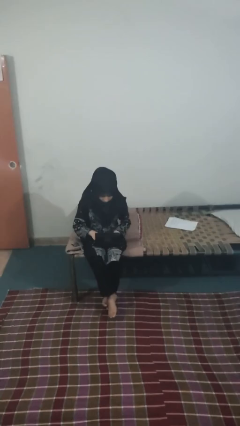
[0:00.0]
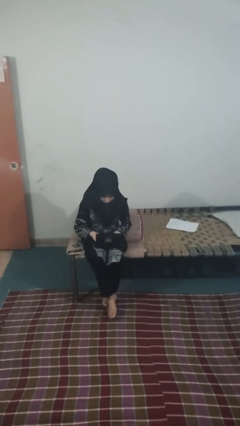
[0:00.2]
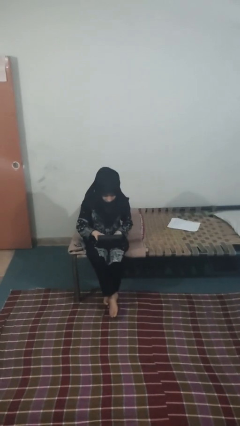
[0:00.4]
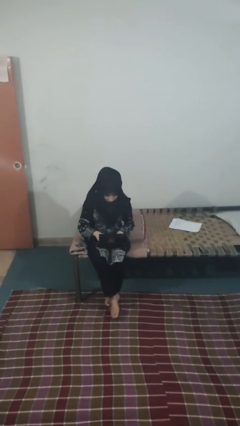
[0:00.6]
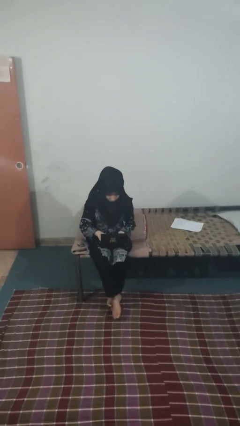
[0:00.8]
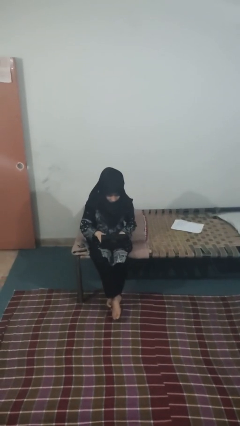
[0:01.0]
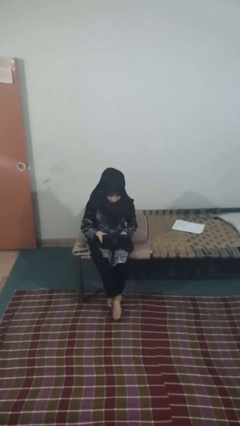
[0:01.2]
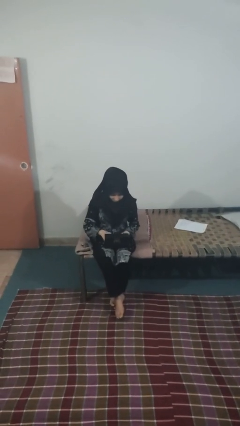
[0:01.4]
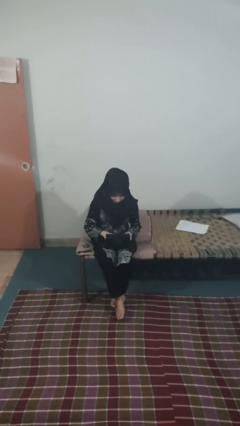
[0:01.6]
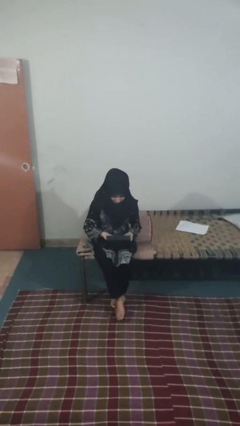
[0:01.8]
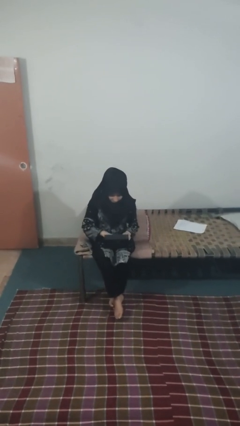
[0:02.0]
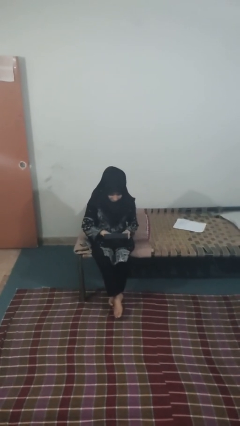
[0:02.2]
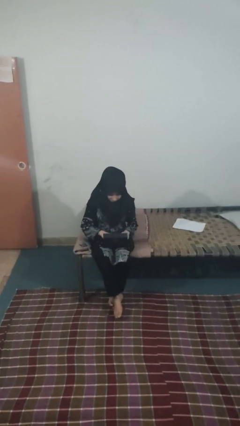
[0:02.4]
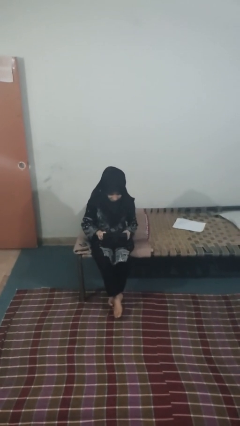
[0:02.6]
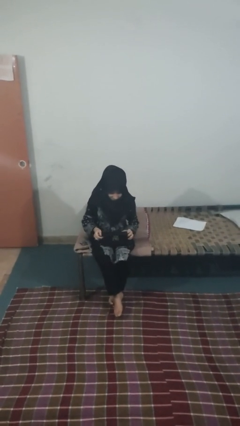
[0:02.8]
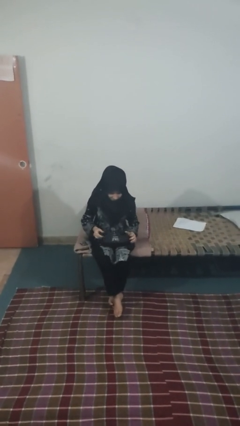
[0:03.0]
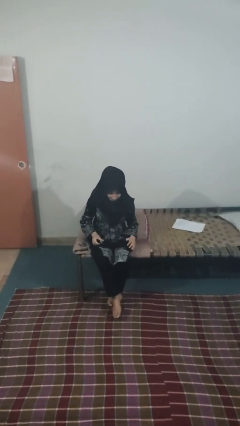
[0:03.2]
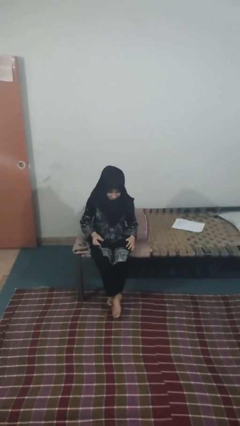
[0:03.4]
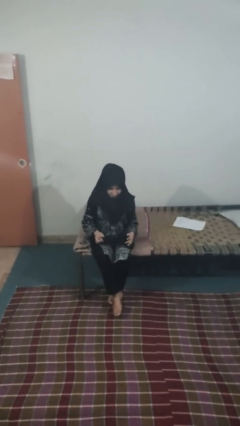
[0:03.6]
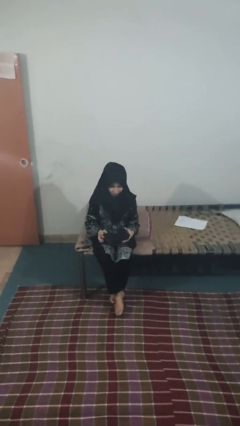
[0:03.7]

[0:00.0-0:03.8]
person searches jewelry box

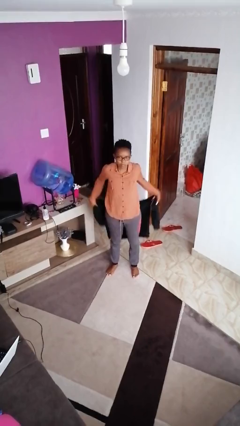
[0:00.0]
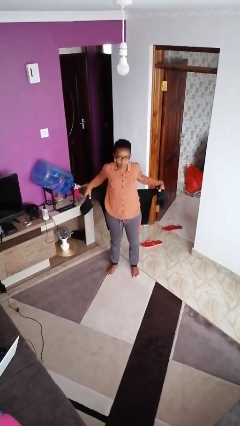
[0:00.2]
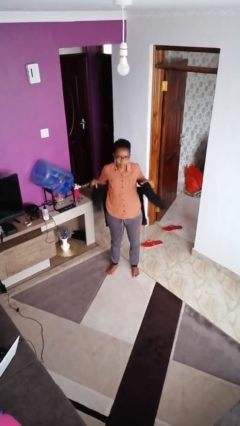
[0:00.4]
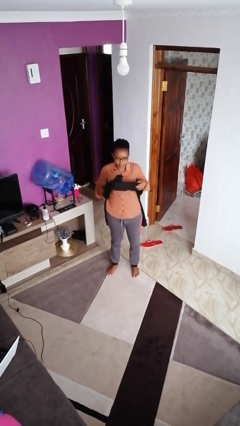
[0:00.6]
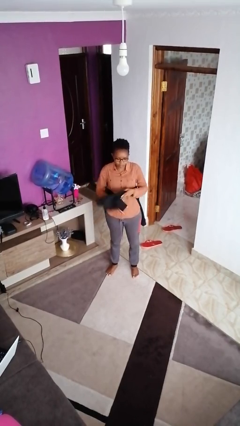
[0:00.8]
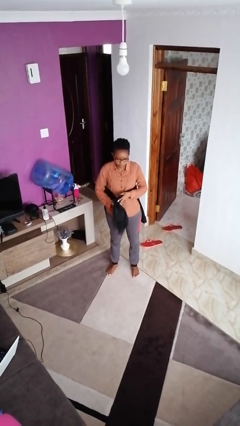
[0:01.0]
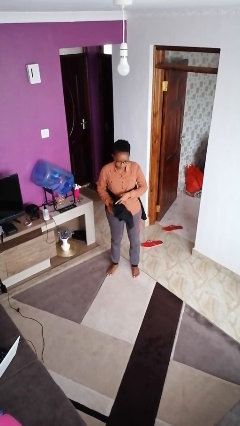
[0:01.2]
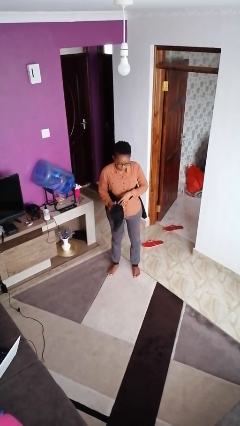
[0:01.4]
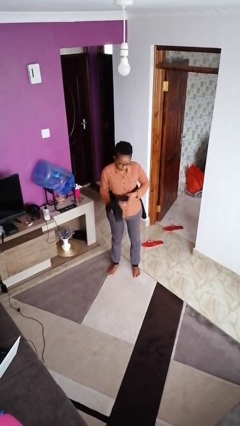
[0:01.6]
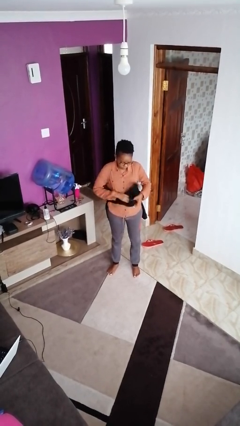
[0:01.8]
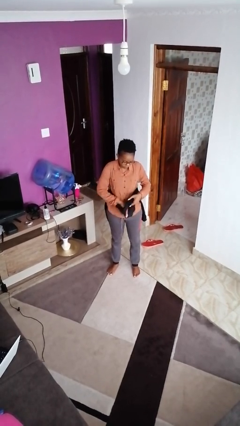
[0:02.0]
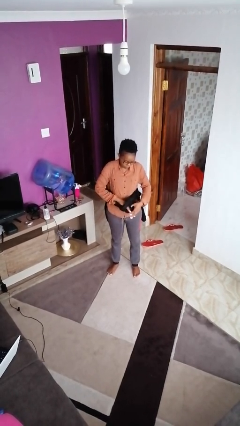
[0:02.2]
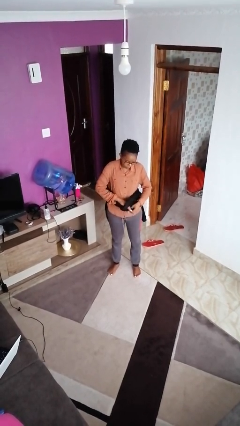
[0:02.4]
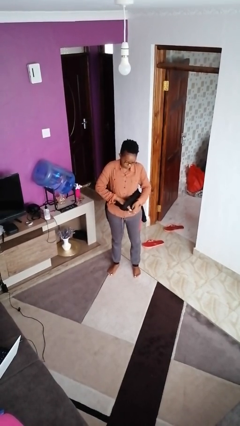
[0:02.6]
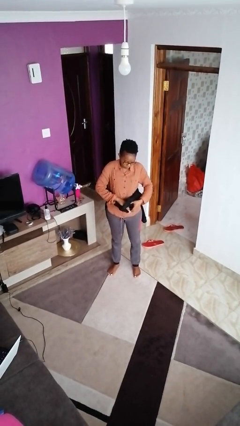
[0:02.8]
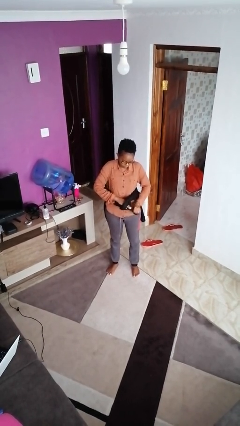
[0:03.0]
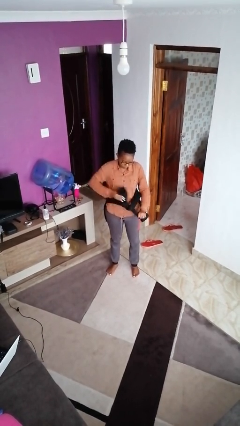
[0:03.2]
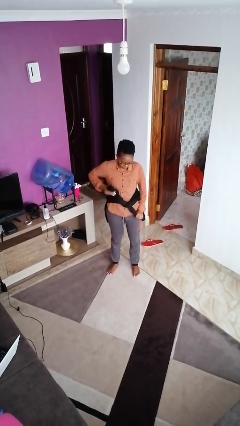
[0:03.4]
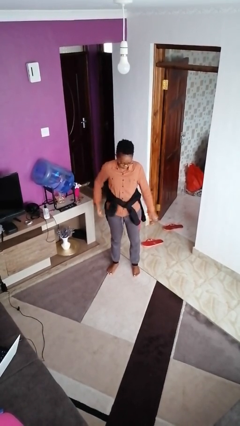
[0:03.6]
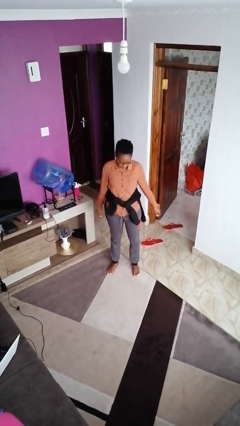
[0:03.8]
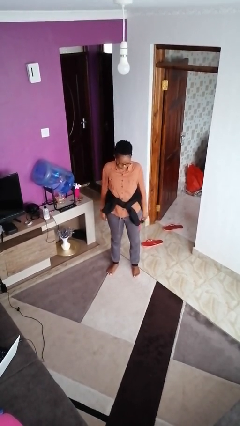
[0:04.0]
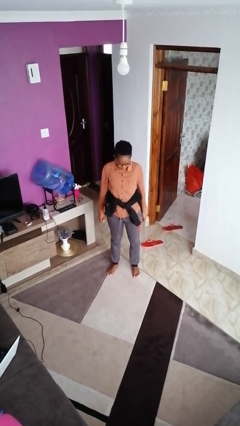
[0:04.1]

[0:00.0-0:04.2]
person ties jacket around waist

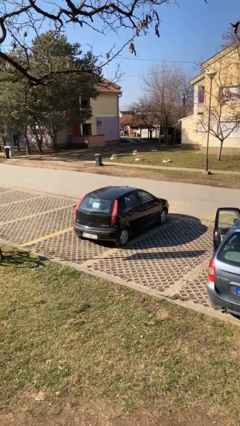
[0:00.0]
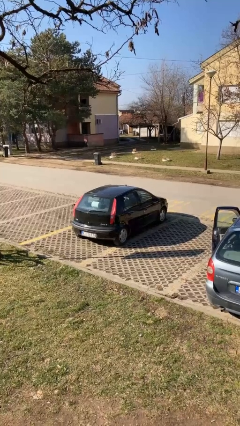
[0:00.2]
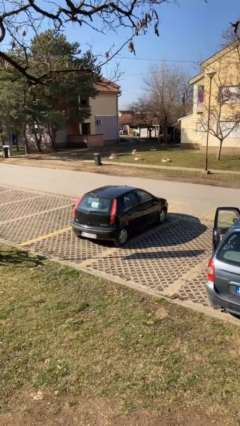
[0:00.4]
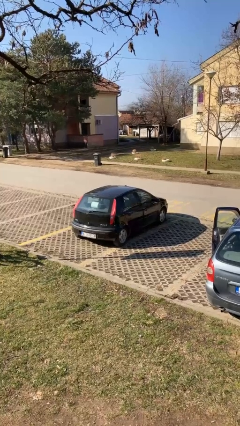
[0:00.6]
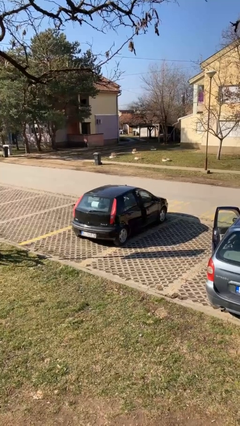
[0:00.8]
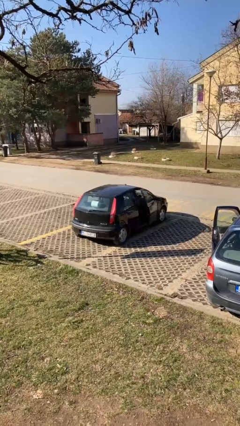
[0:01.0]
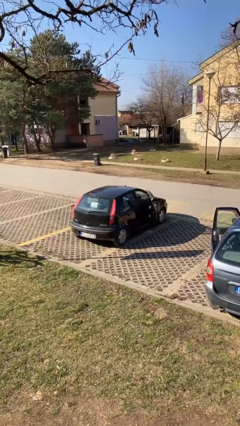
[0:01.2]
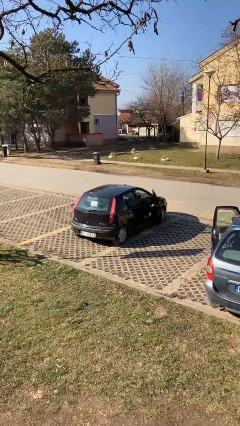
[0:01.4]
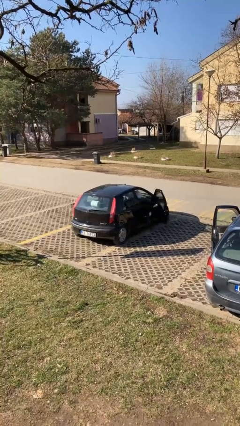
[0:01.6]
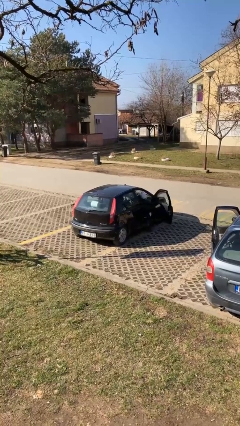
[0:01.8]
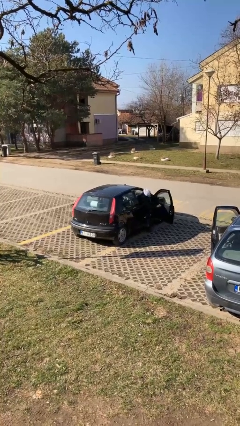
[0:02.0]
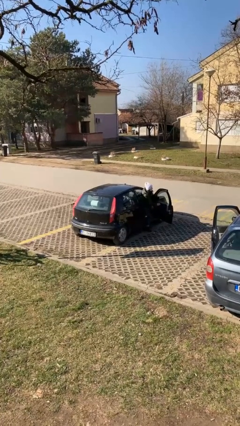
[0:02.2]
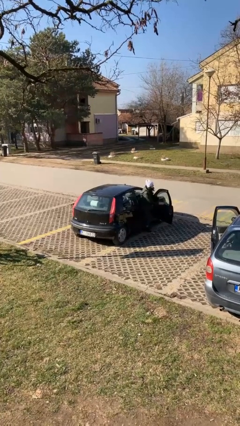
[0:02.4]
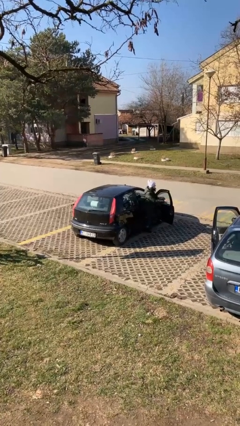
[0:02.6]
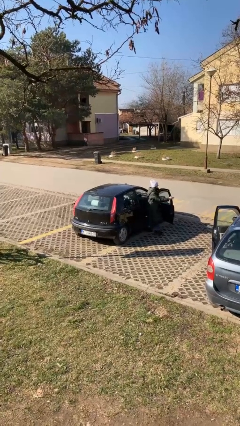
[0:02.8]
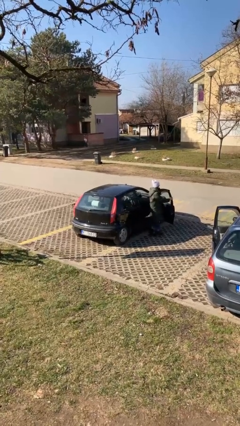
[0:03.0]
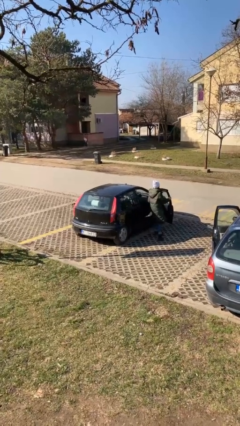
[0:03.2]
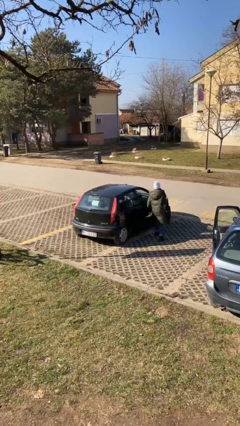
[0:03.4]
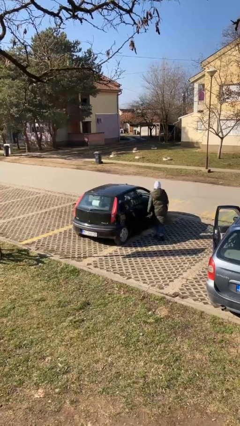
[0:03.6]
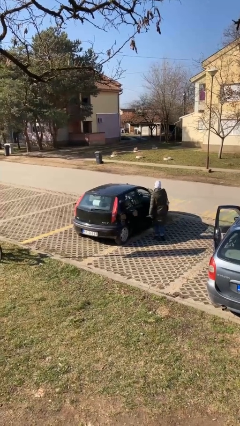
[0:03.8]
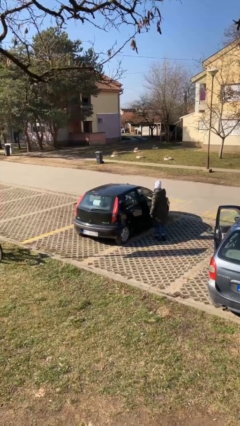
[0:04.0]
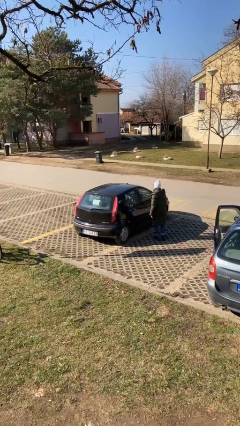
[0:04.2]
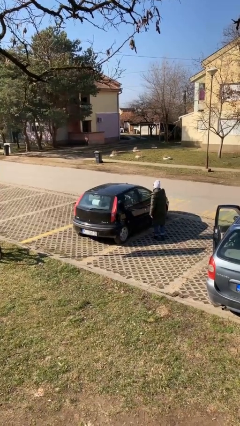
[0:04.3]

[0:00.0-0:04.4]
car drops off person

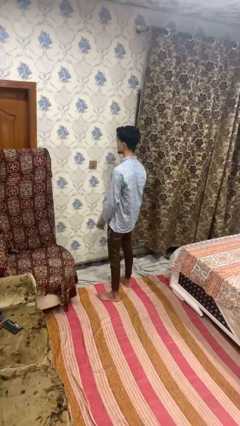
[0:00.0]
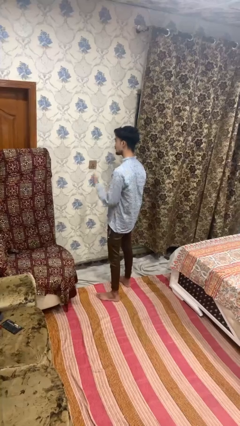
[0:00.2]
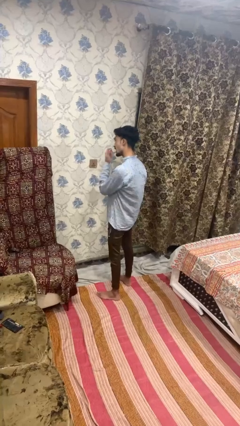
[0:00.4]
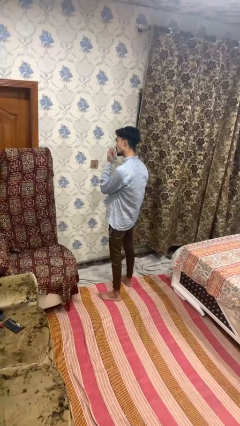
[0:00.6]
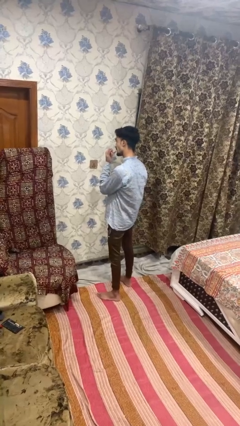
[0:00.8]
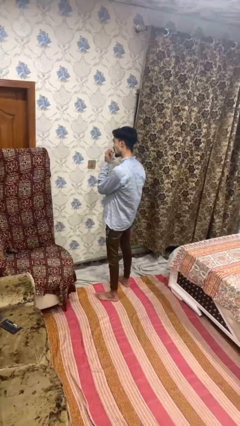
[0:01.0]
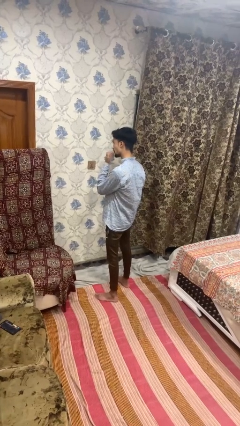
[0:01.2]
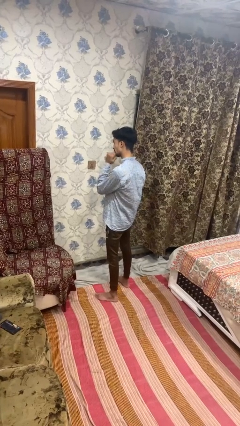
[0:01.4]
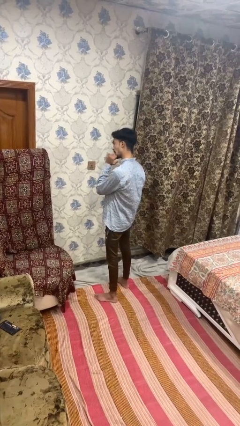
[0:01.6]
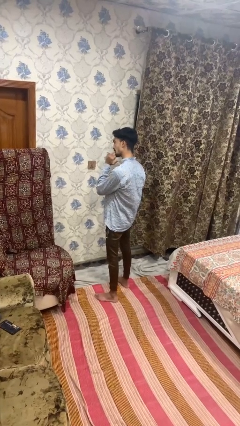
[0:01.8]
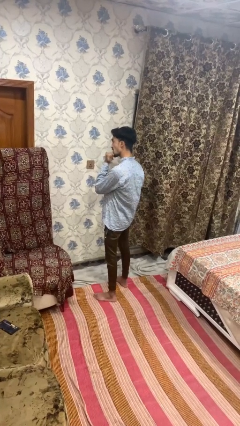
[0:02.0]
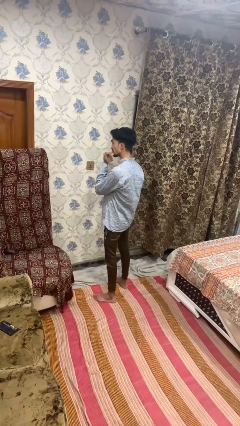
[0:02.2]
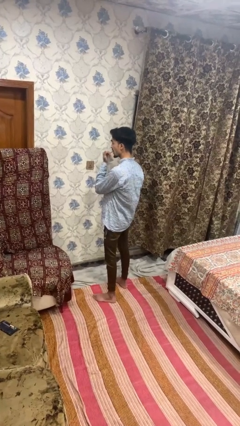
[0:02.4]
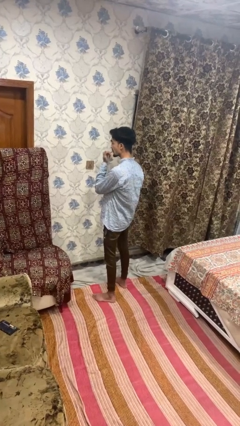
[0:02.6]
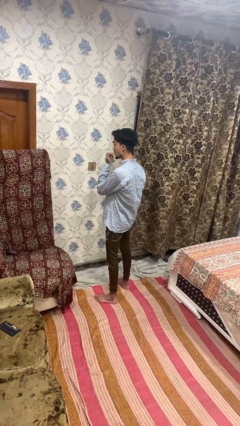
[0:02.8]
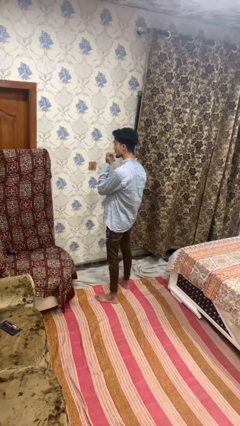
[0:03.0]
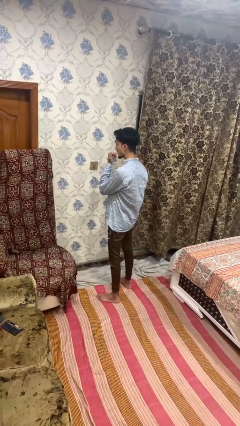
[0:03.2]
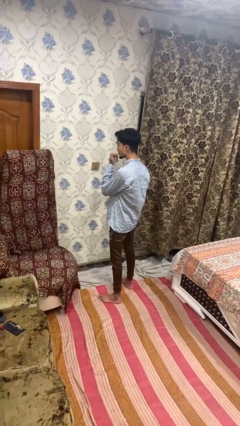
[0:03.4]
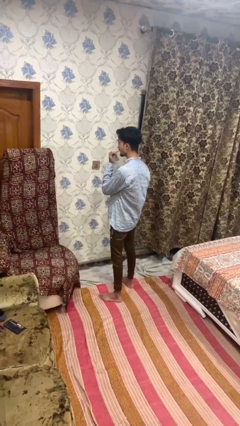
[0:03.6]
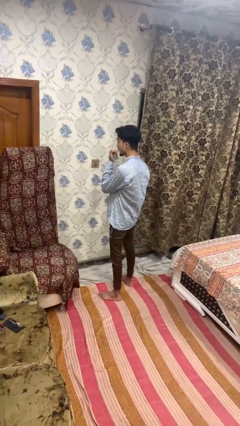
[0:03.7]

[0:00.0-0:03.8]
person licks fingers

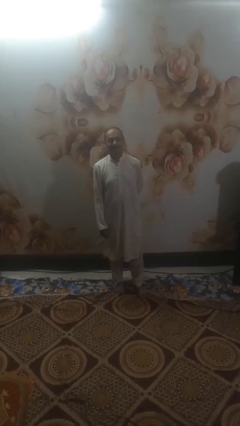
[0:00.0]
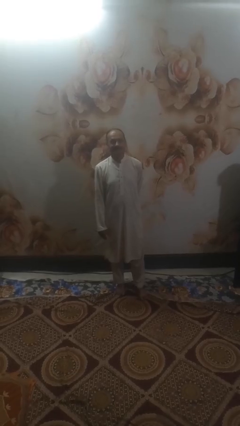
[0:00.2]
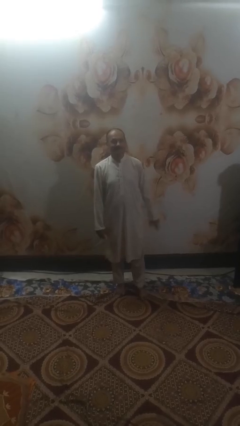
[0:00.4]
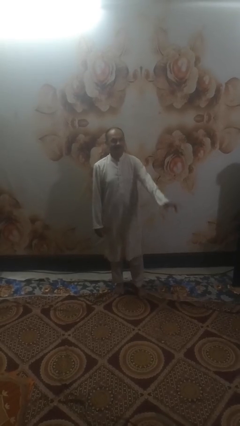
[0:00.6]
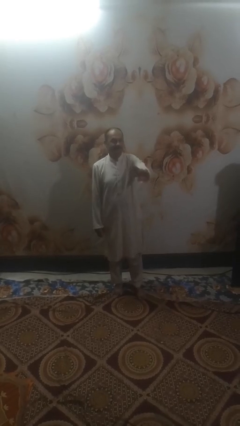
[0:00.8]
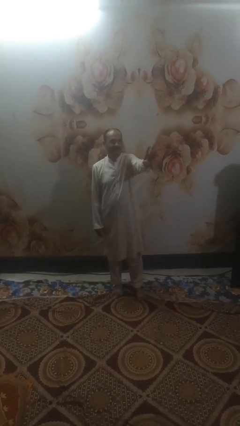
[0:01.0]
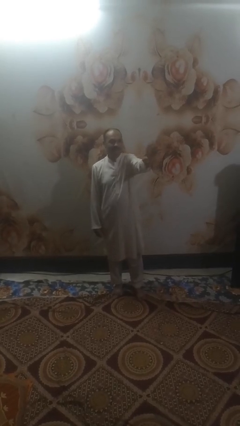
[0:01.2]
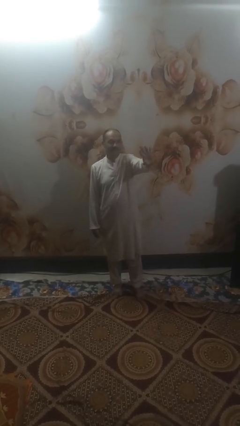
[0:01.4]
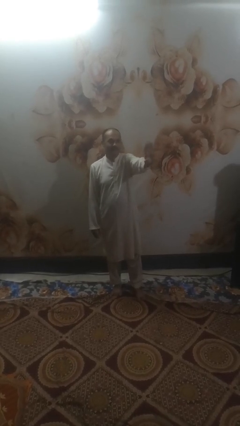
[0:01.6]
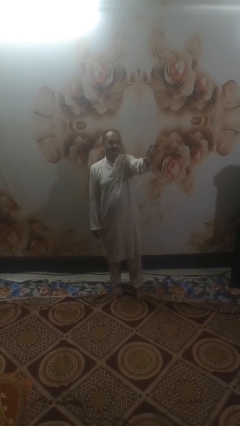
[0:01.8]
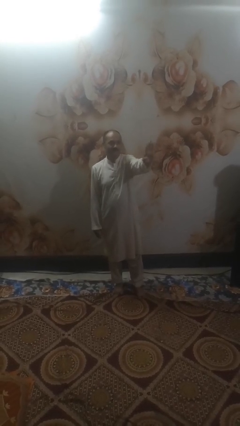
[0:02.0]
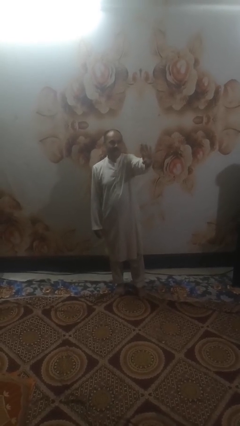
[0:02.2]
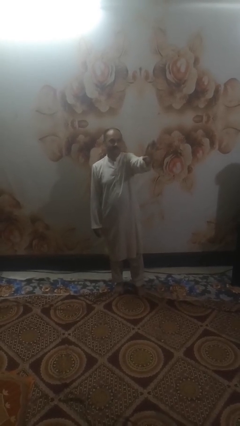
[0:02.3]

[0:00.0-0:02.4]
person waves at person
